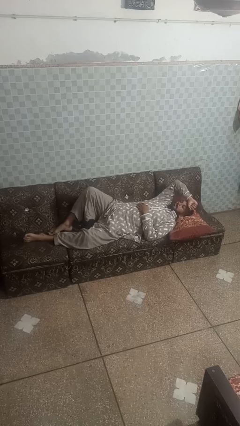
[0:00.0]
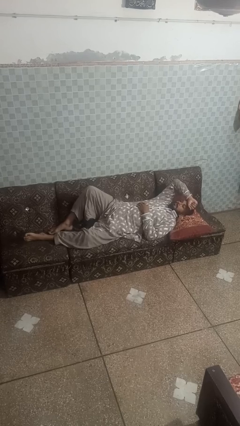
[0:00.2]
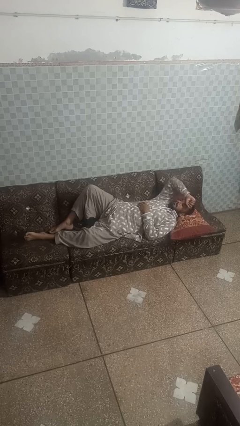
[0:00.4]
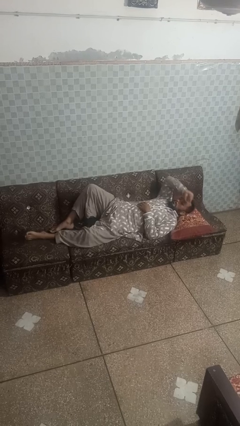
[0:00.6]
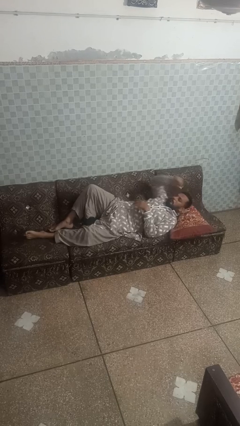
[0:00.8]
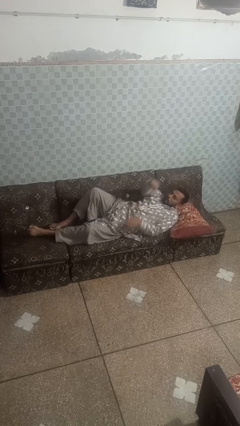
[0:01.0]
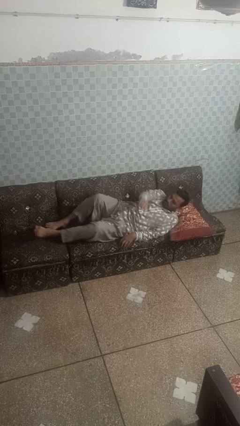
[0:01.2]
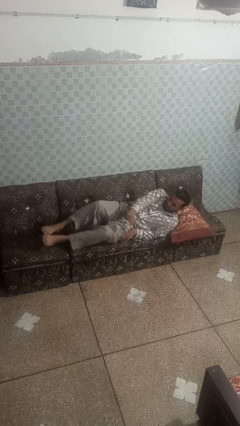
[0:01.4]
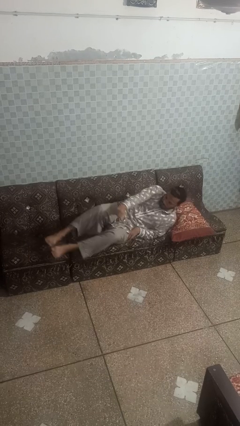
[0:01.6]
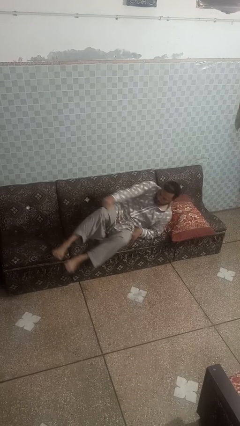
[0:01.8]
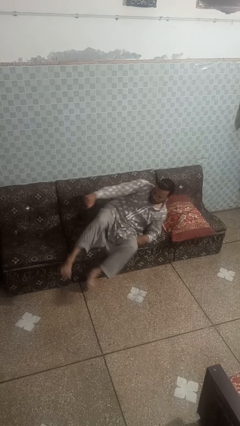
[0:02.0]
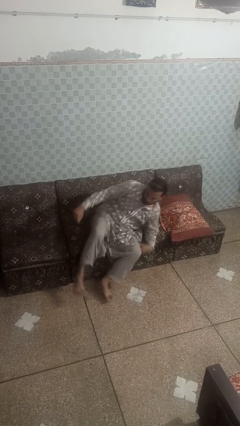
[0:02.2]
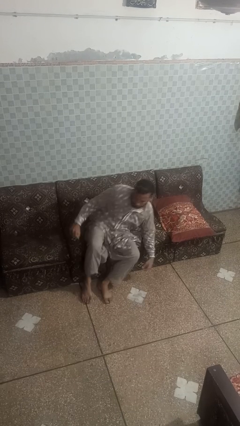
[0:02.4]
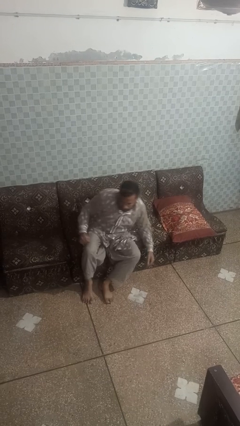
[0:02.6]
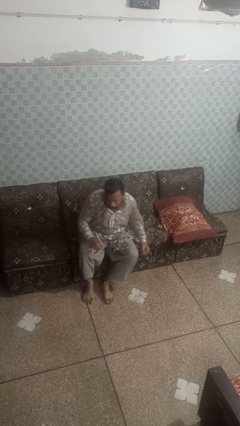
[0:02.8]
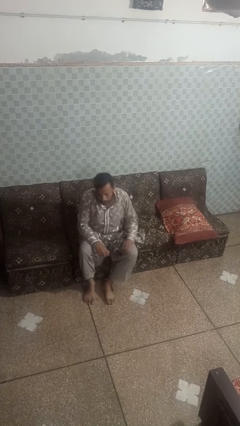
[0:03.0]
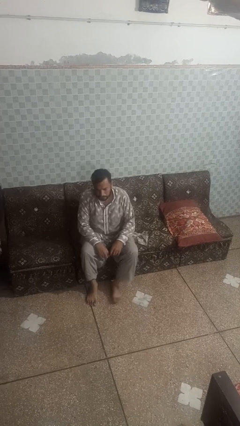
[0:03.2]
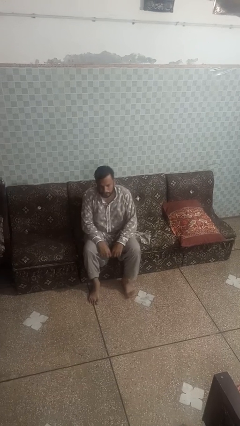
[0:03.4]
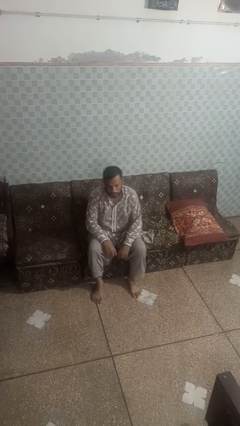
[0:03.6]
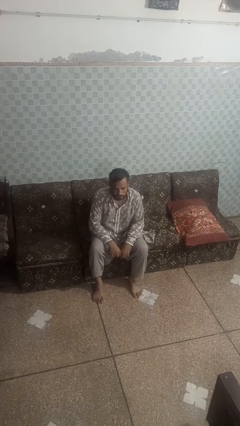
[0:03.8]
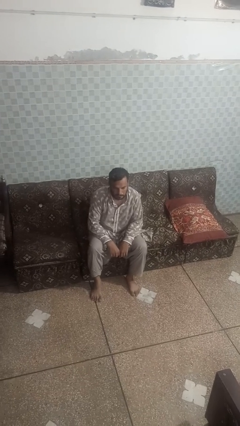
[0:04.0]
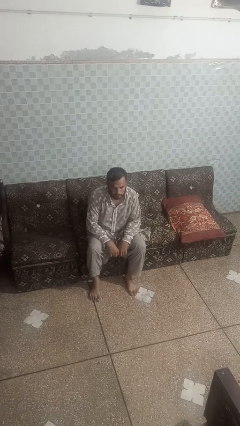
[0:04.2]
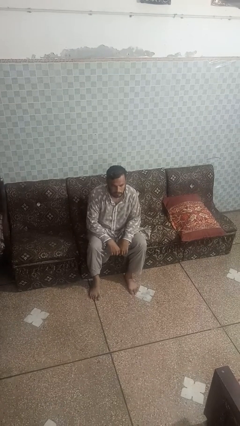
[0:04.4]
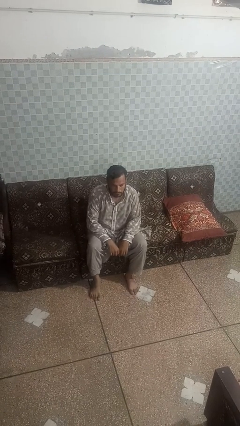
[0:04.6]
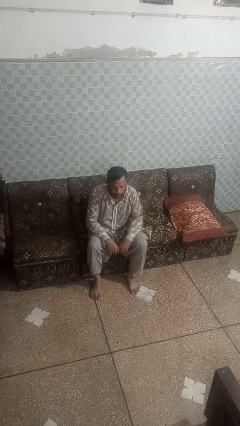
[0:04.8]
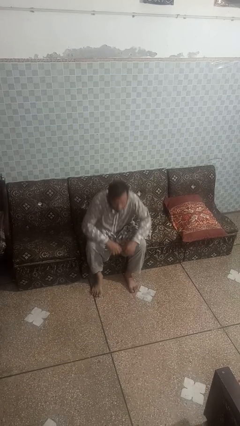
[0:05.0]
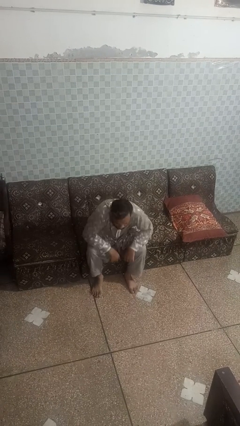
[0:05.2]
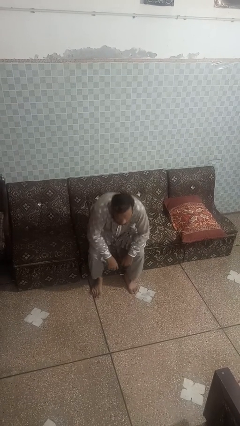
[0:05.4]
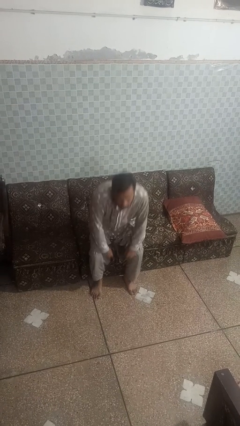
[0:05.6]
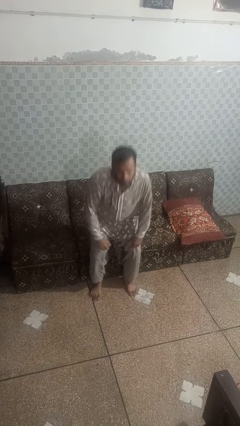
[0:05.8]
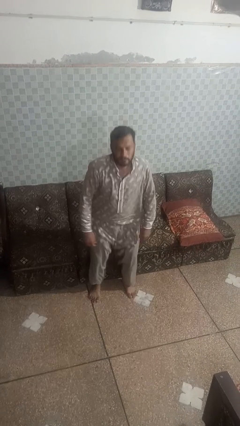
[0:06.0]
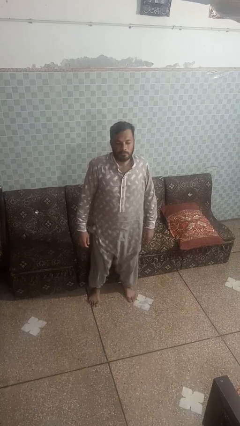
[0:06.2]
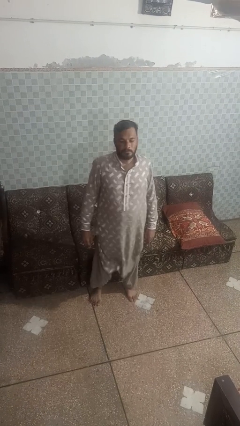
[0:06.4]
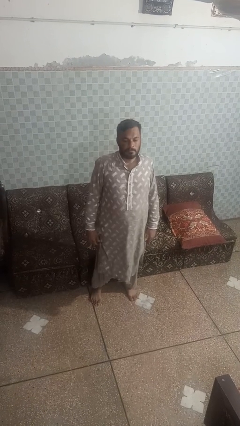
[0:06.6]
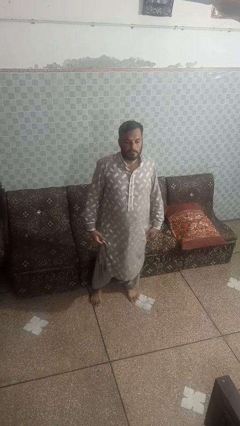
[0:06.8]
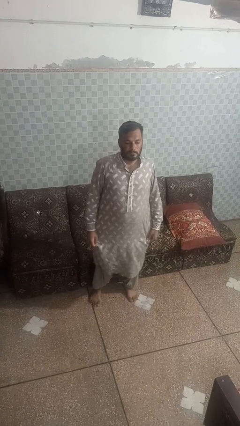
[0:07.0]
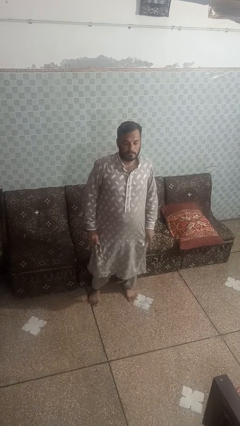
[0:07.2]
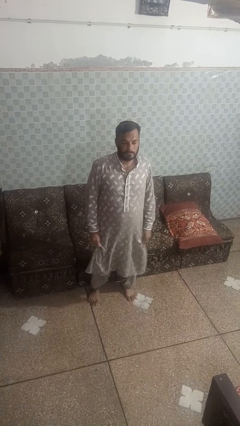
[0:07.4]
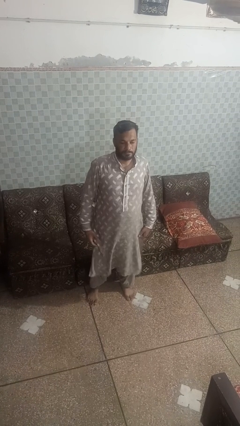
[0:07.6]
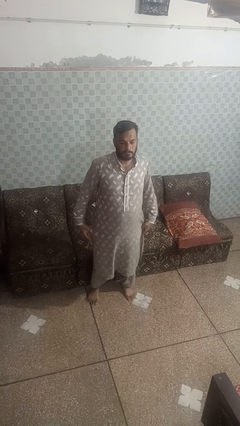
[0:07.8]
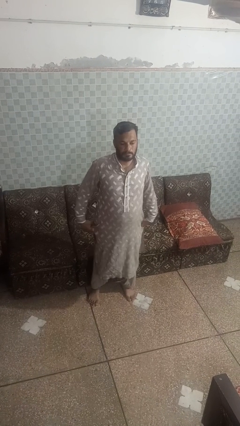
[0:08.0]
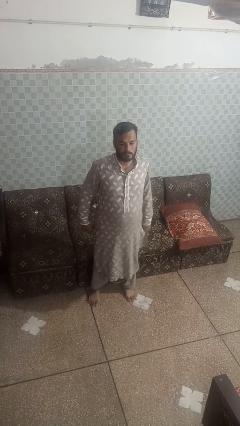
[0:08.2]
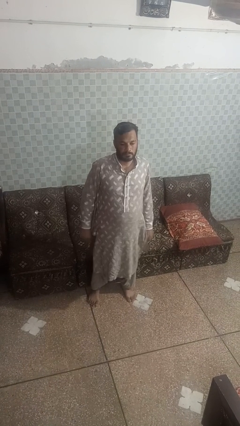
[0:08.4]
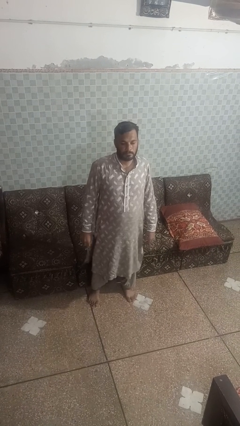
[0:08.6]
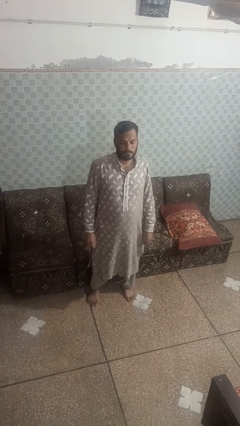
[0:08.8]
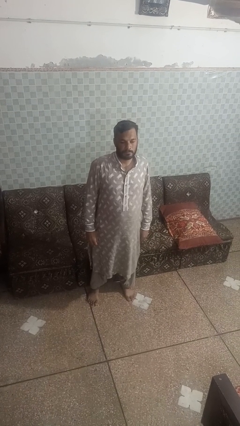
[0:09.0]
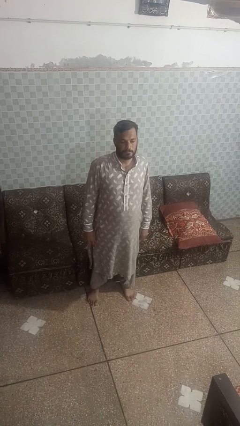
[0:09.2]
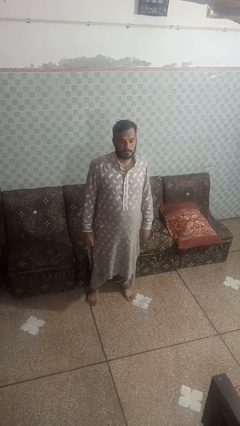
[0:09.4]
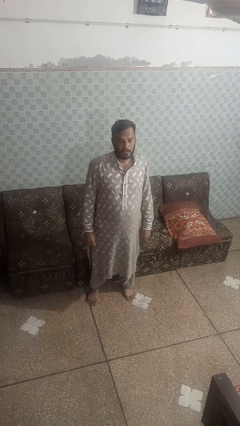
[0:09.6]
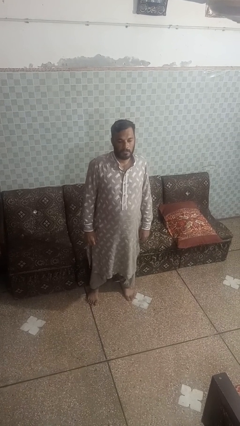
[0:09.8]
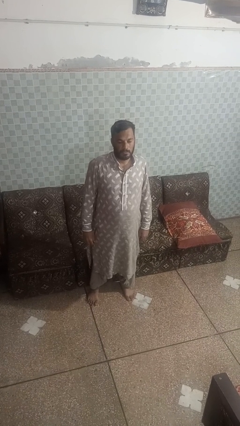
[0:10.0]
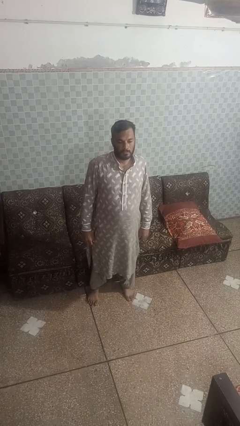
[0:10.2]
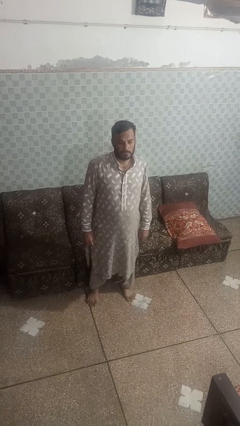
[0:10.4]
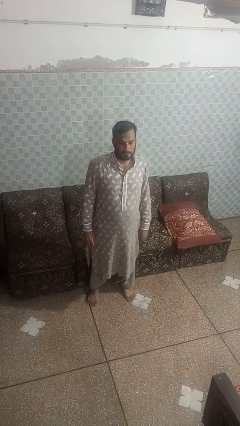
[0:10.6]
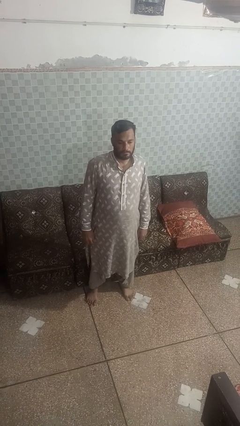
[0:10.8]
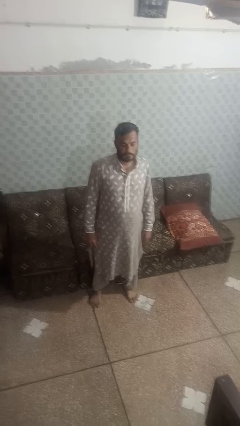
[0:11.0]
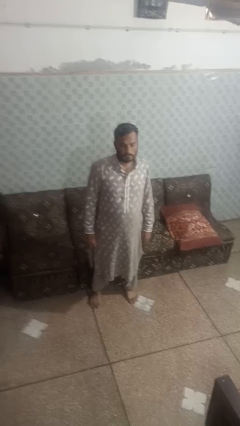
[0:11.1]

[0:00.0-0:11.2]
person stands up

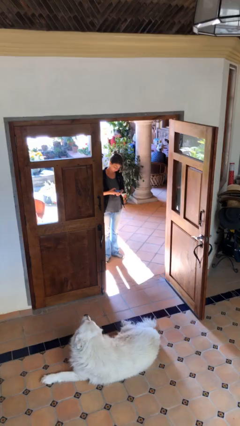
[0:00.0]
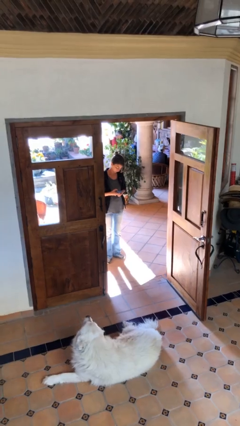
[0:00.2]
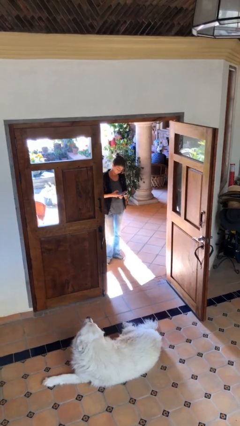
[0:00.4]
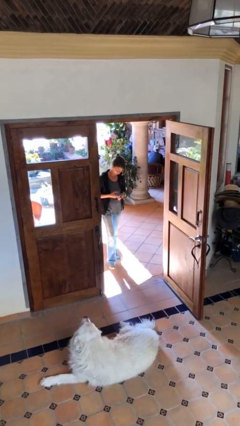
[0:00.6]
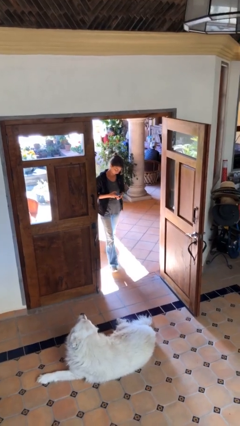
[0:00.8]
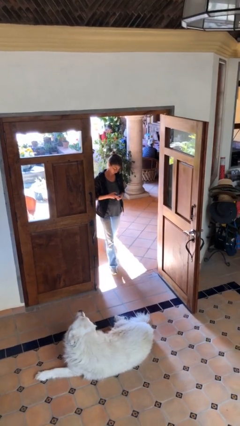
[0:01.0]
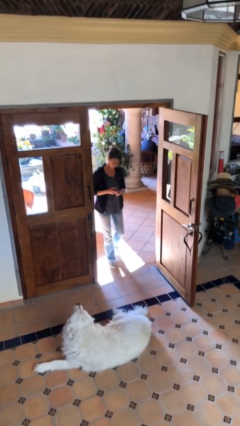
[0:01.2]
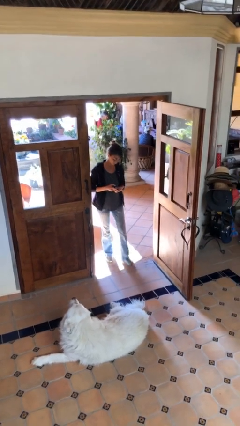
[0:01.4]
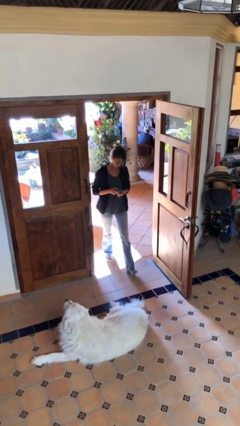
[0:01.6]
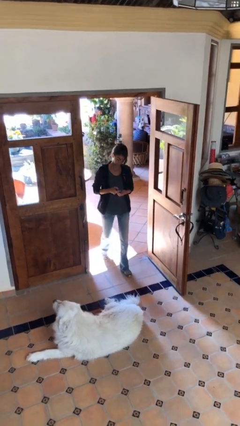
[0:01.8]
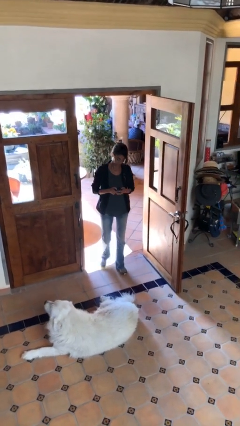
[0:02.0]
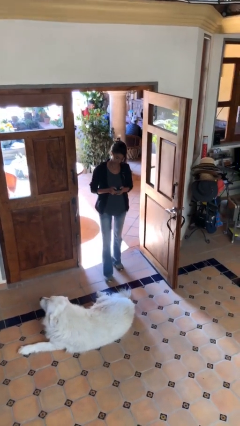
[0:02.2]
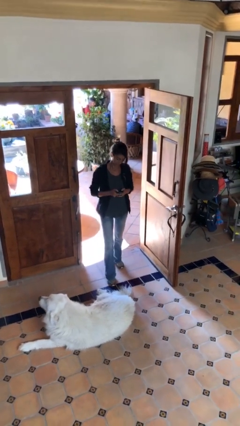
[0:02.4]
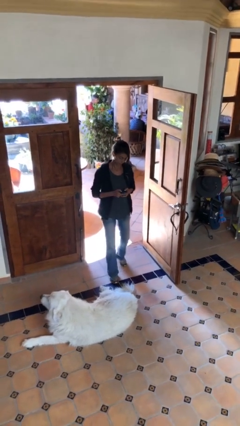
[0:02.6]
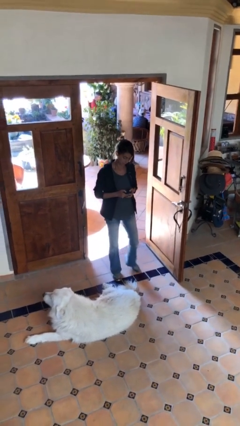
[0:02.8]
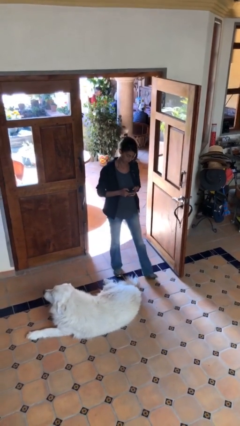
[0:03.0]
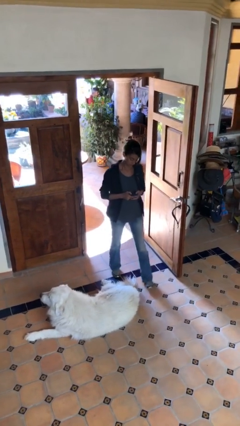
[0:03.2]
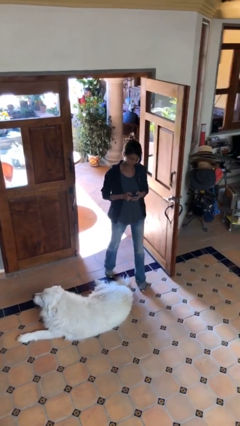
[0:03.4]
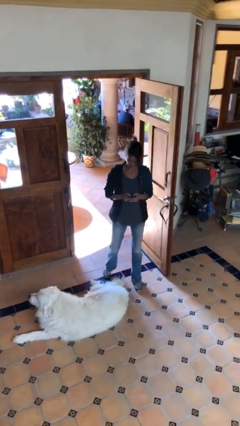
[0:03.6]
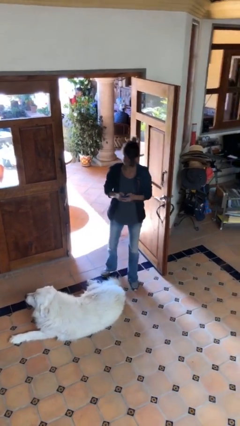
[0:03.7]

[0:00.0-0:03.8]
person enters scene through structure

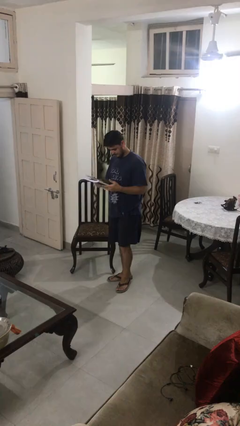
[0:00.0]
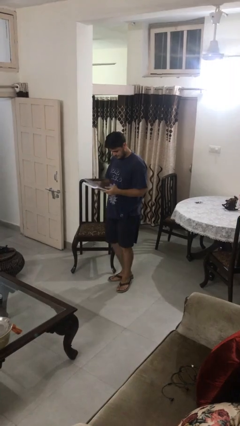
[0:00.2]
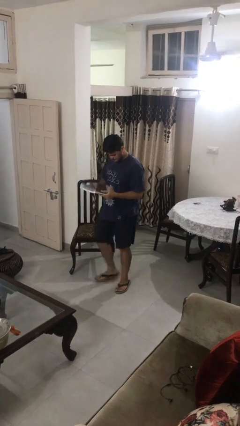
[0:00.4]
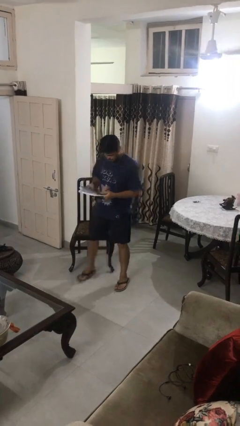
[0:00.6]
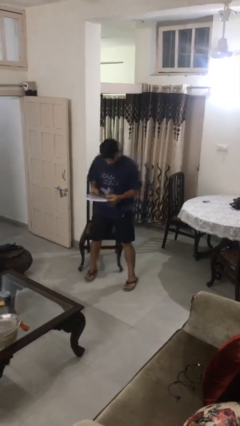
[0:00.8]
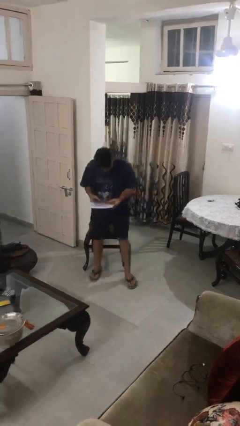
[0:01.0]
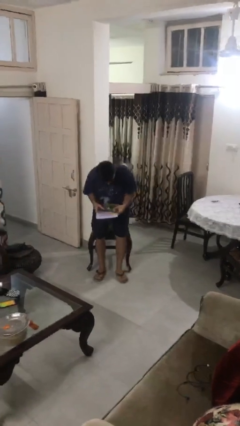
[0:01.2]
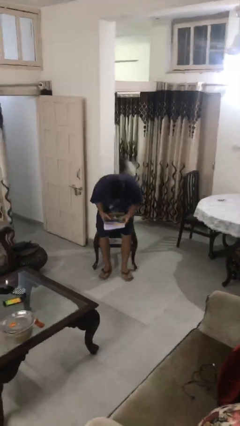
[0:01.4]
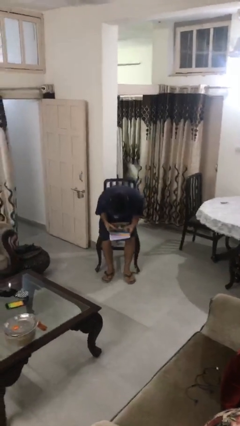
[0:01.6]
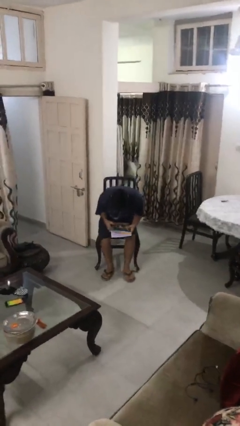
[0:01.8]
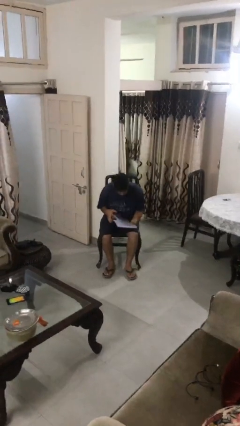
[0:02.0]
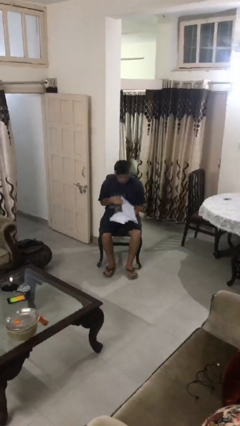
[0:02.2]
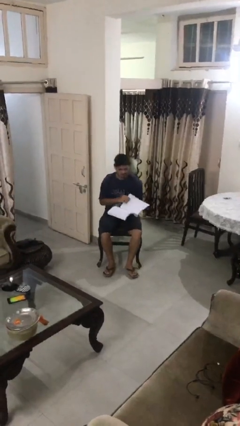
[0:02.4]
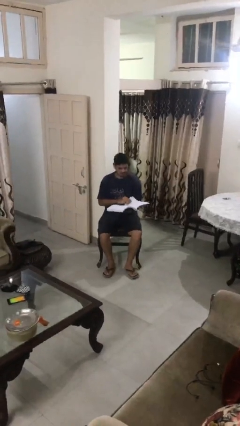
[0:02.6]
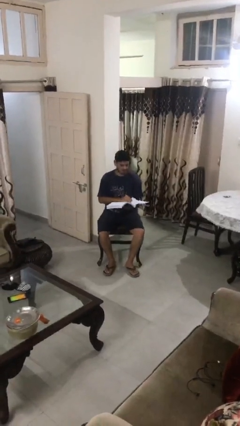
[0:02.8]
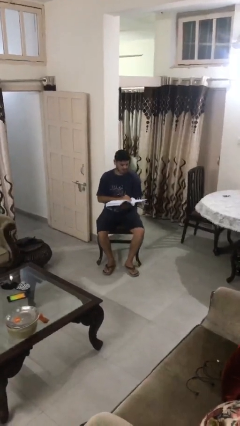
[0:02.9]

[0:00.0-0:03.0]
person sits down
